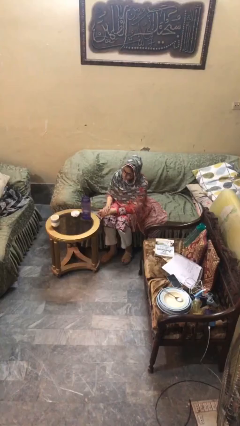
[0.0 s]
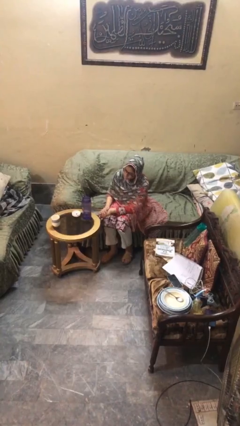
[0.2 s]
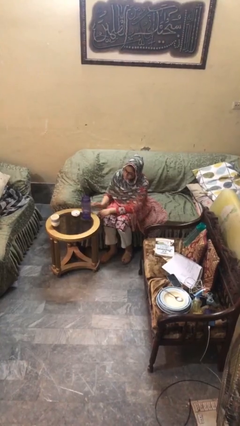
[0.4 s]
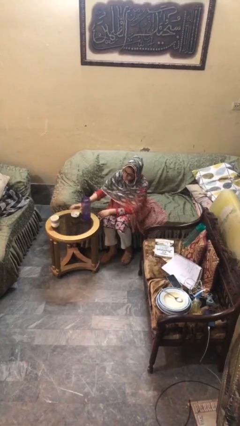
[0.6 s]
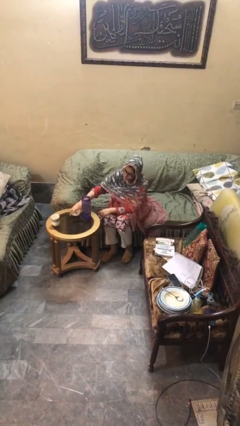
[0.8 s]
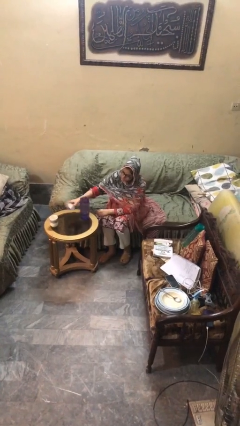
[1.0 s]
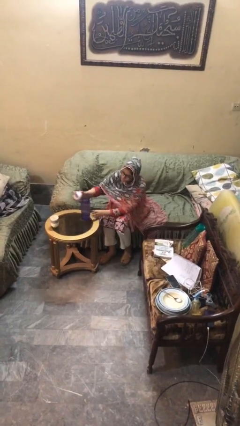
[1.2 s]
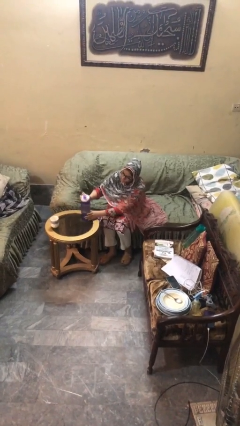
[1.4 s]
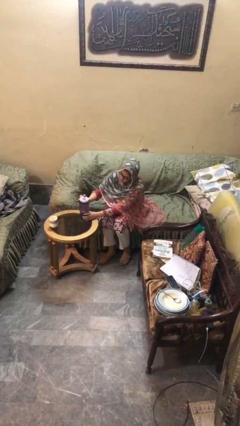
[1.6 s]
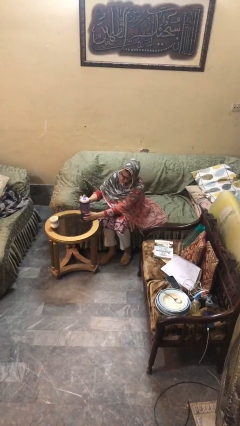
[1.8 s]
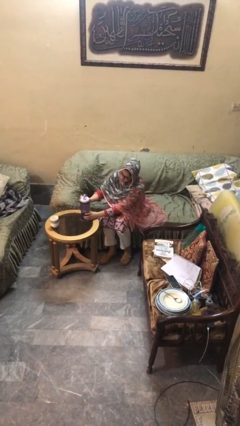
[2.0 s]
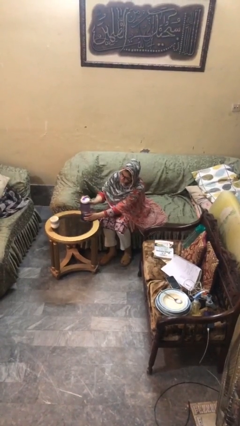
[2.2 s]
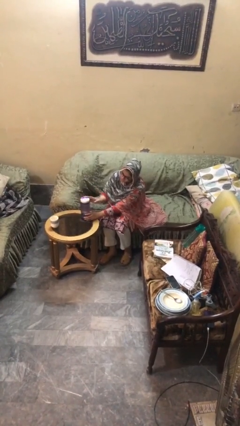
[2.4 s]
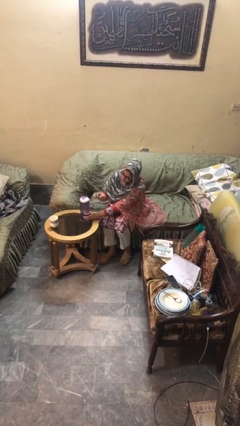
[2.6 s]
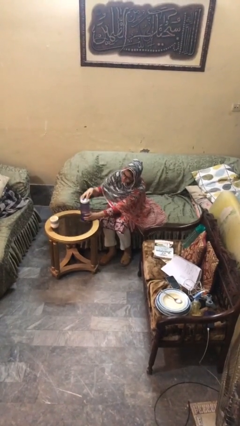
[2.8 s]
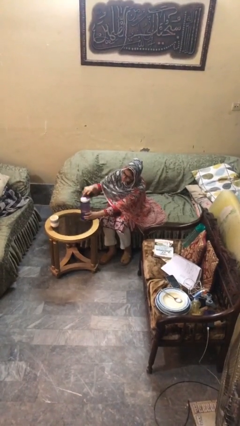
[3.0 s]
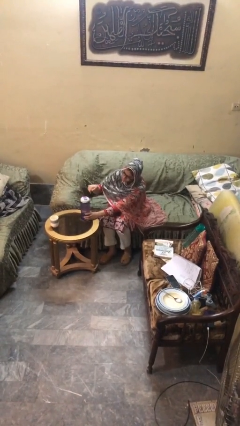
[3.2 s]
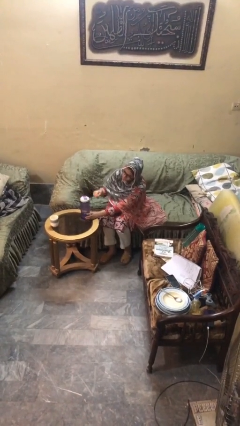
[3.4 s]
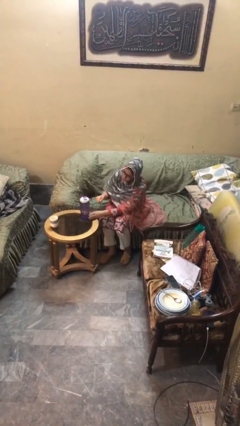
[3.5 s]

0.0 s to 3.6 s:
person screws lid to bottle

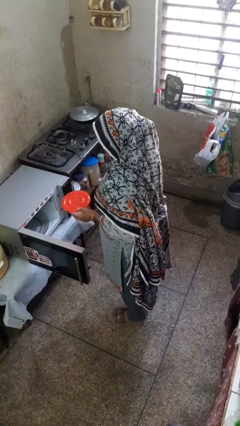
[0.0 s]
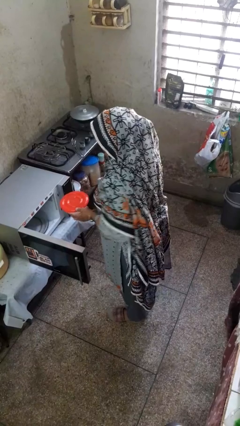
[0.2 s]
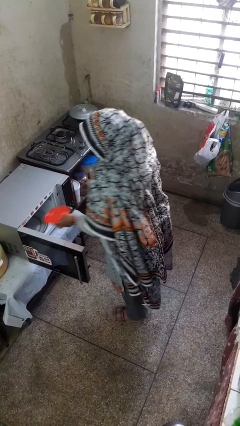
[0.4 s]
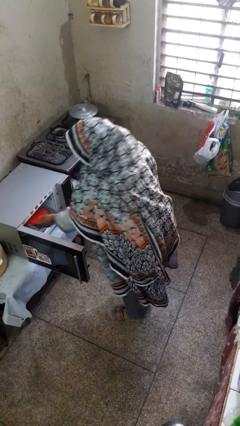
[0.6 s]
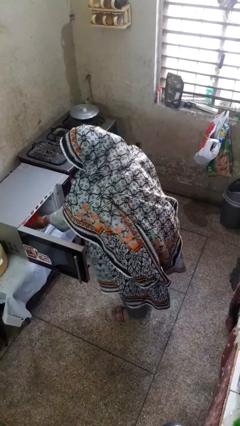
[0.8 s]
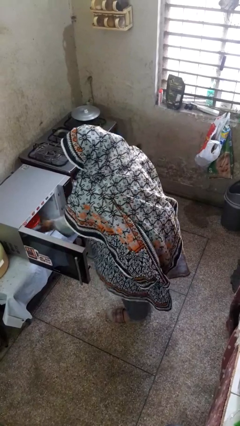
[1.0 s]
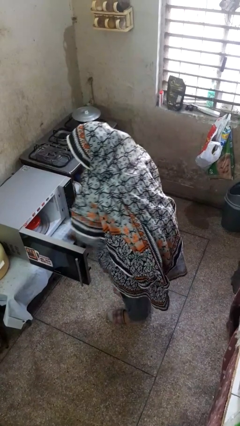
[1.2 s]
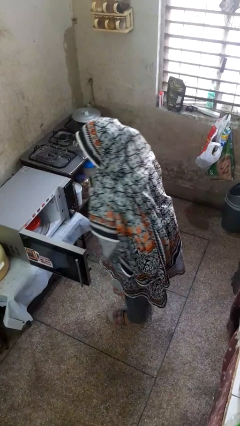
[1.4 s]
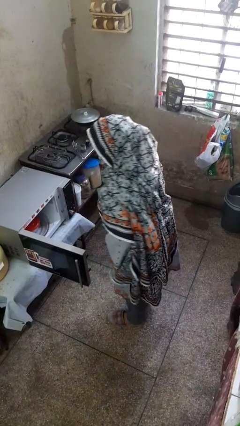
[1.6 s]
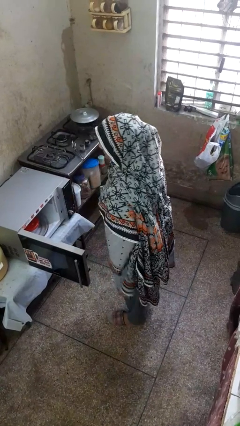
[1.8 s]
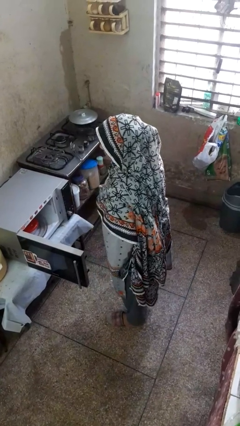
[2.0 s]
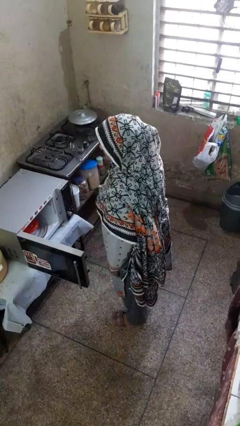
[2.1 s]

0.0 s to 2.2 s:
person puts object into microwave

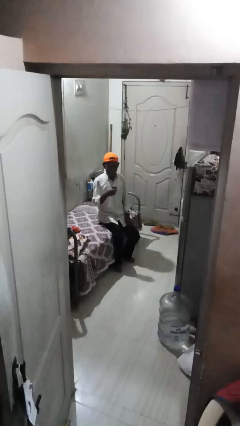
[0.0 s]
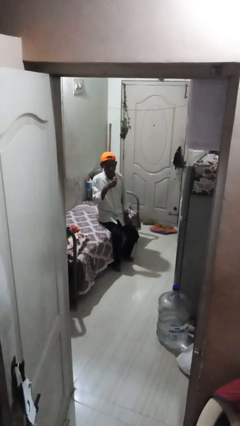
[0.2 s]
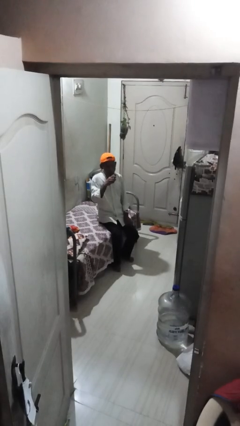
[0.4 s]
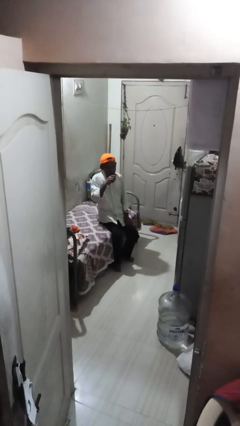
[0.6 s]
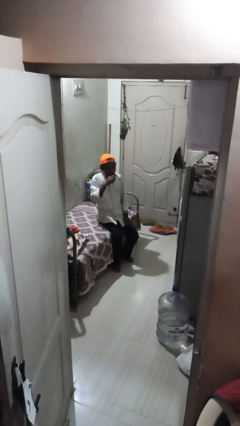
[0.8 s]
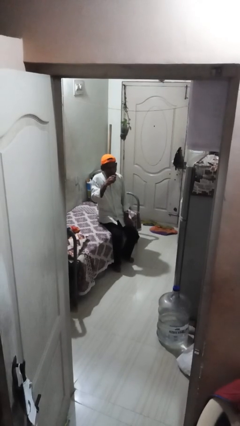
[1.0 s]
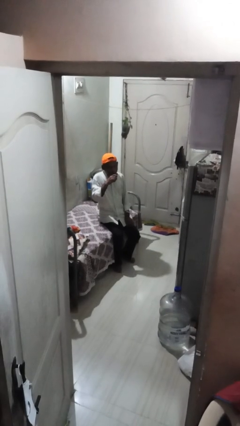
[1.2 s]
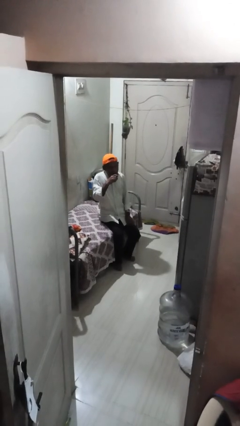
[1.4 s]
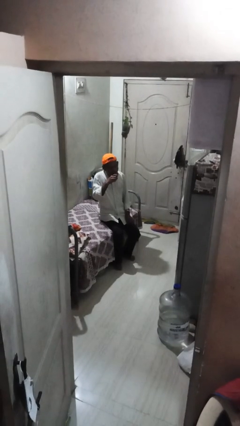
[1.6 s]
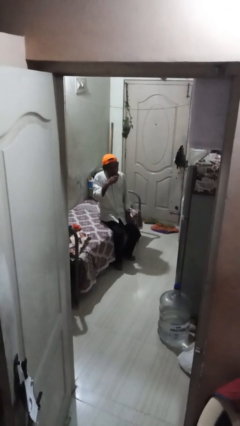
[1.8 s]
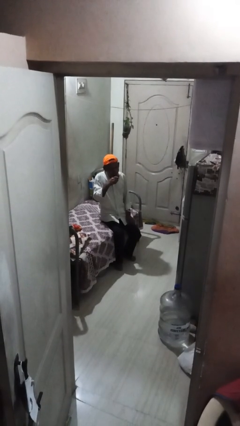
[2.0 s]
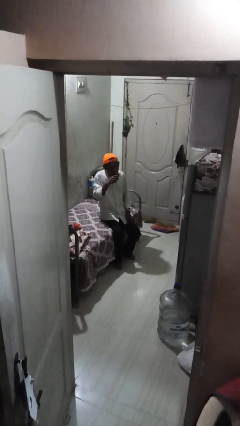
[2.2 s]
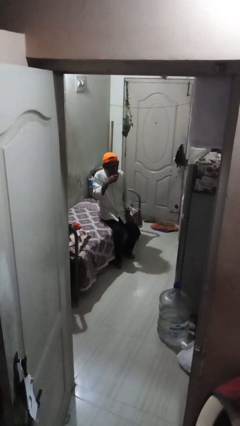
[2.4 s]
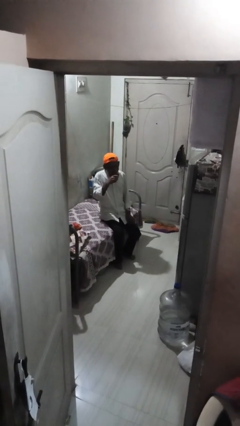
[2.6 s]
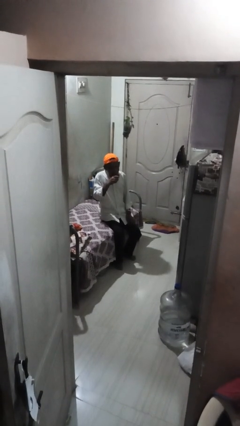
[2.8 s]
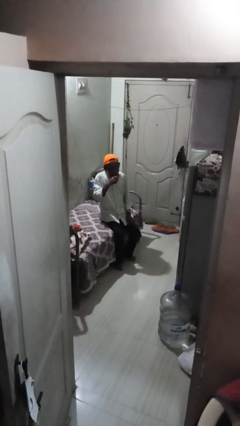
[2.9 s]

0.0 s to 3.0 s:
person eats apple

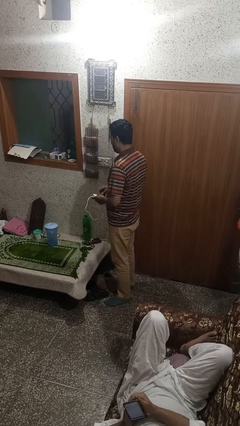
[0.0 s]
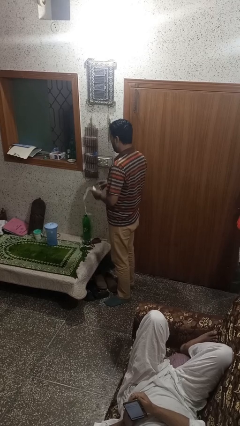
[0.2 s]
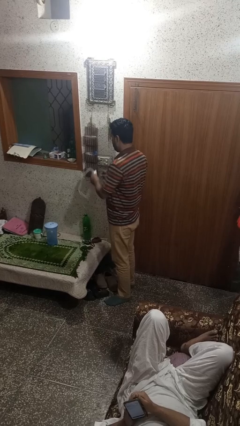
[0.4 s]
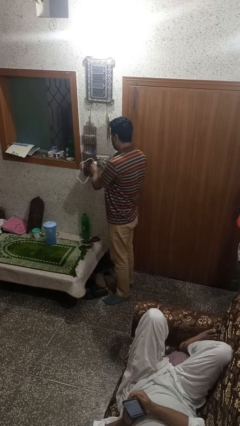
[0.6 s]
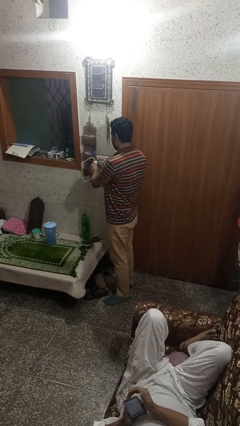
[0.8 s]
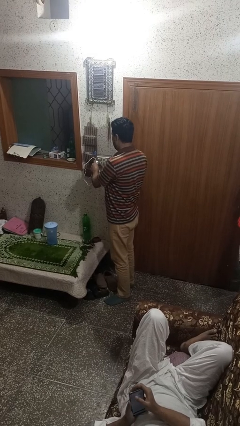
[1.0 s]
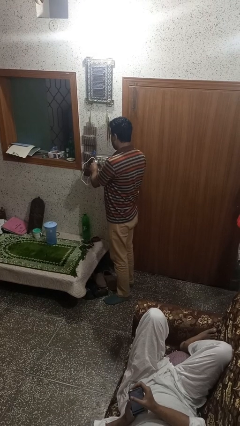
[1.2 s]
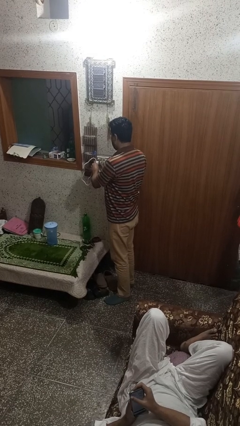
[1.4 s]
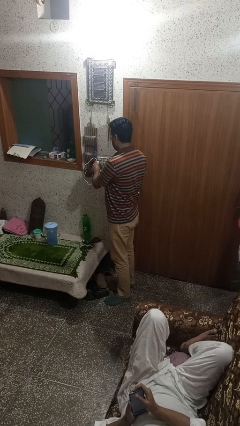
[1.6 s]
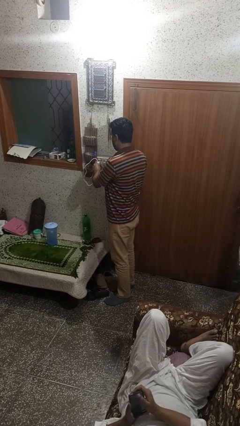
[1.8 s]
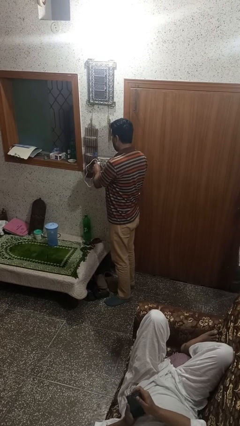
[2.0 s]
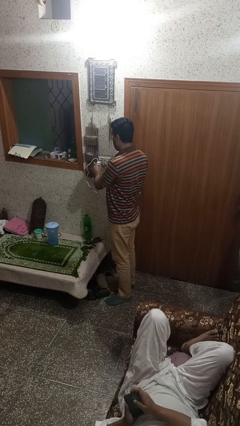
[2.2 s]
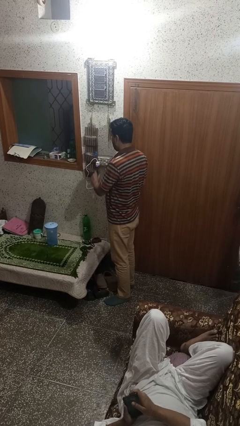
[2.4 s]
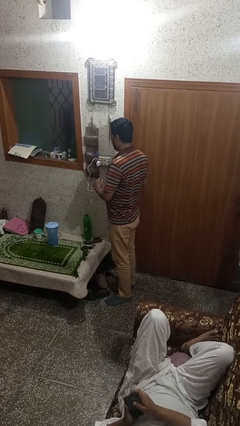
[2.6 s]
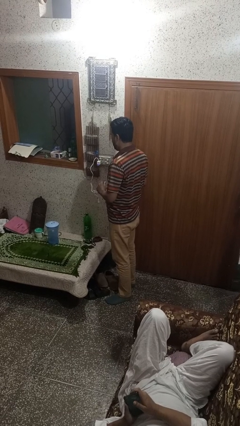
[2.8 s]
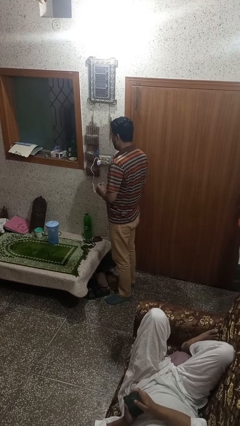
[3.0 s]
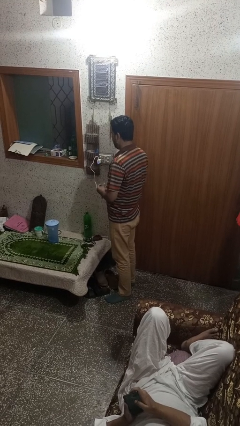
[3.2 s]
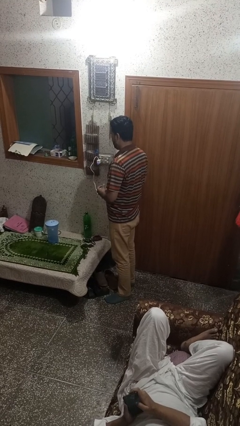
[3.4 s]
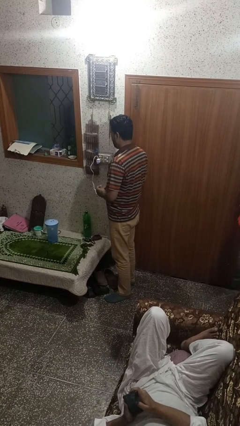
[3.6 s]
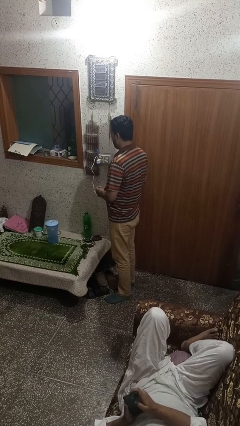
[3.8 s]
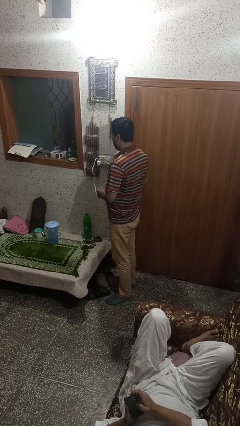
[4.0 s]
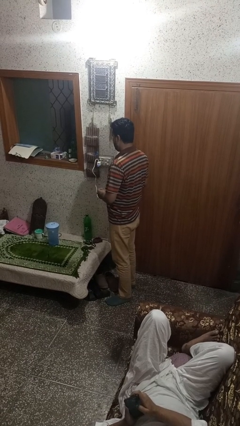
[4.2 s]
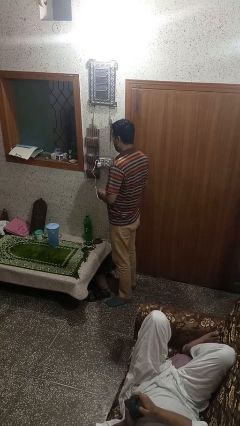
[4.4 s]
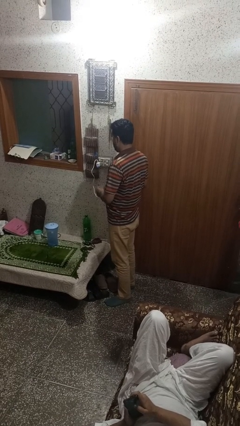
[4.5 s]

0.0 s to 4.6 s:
person plugs into electrical socket

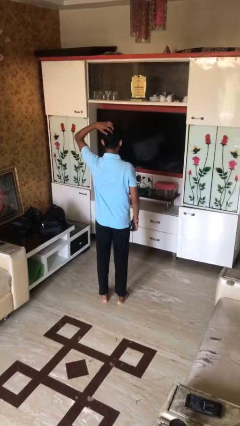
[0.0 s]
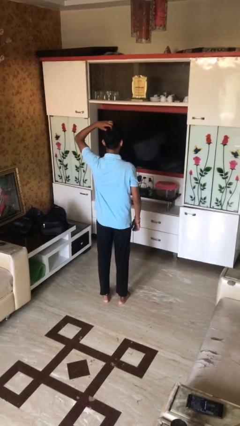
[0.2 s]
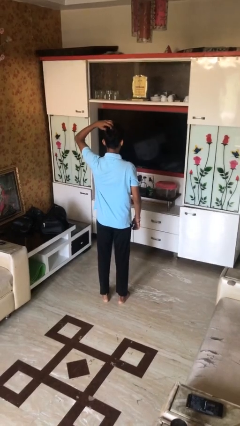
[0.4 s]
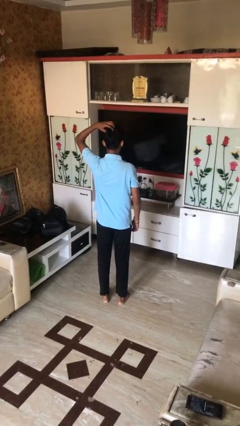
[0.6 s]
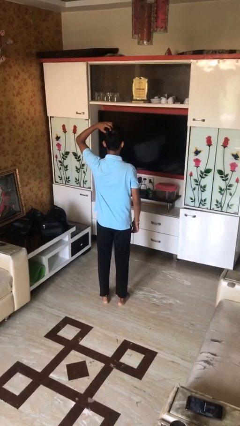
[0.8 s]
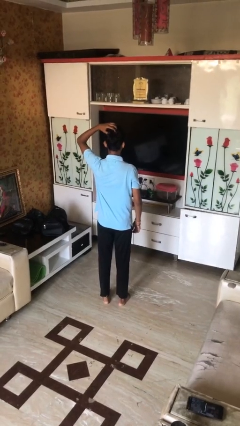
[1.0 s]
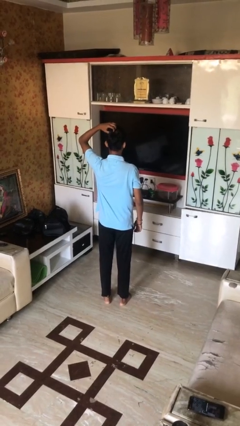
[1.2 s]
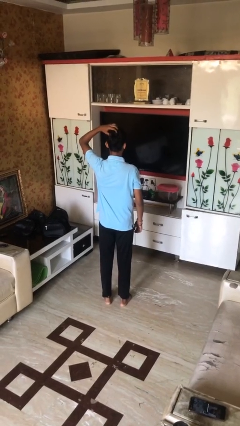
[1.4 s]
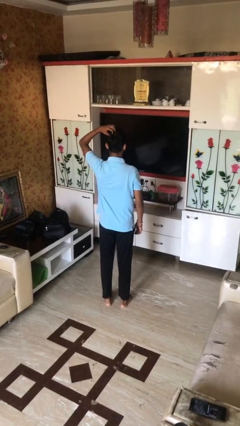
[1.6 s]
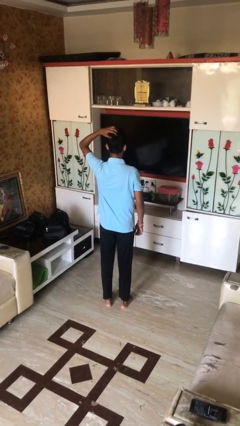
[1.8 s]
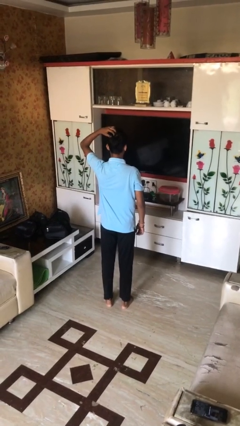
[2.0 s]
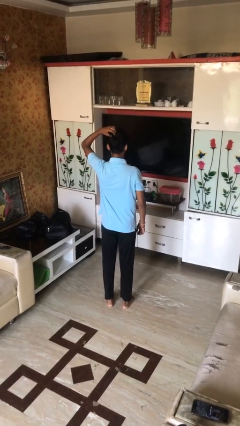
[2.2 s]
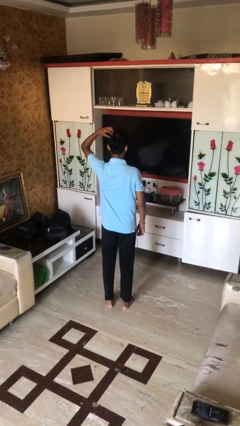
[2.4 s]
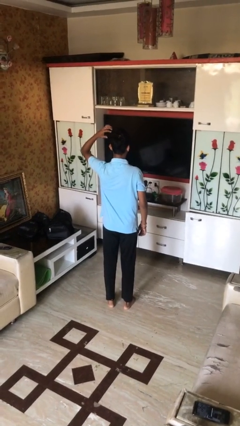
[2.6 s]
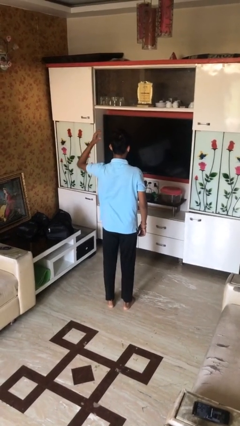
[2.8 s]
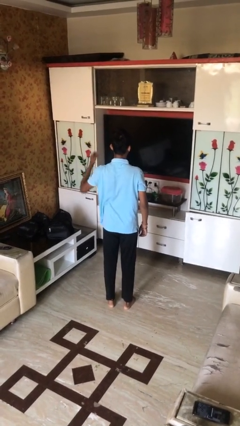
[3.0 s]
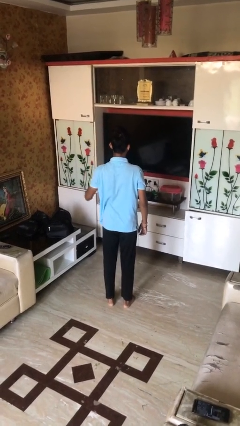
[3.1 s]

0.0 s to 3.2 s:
person scratches face

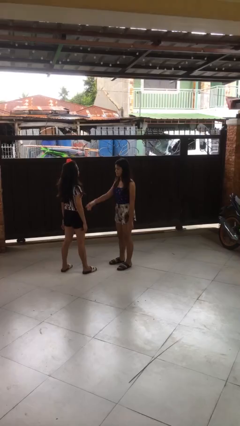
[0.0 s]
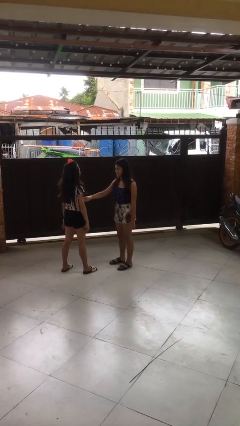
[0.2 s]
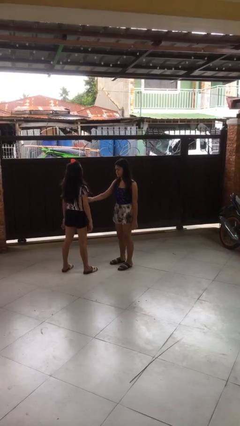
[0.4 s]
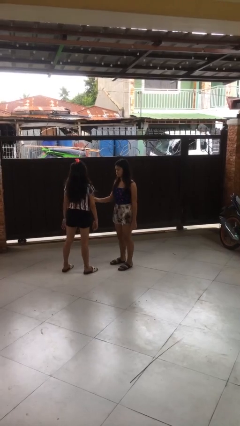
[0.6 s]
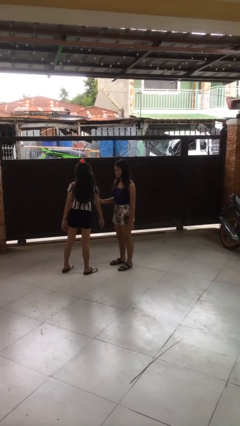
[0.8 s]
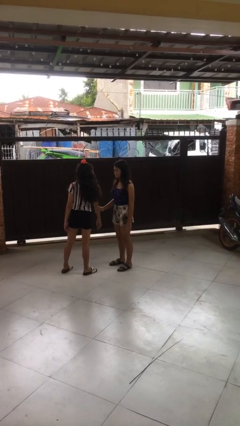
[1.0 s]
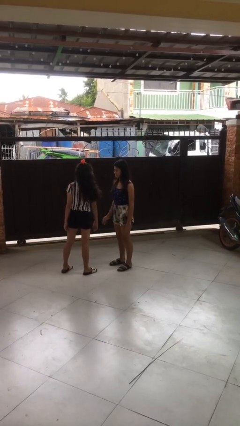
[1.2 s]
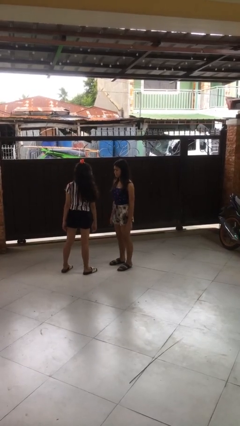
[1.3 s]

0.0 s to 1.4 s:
person grabs person by bicep
